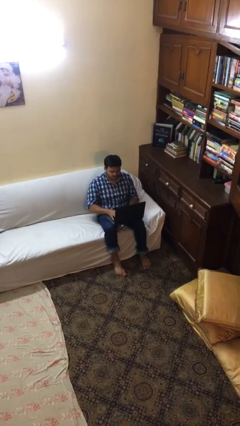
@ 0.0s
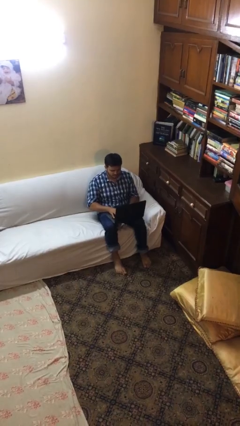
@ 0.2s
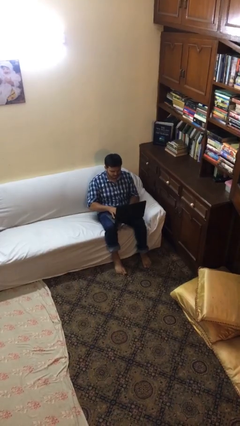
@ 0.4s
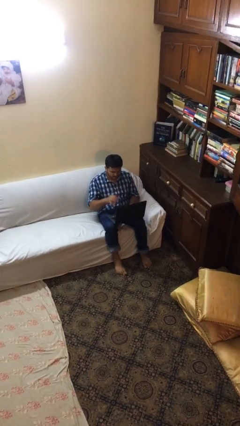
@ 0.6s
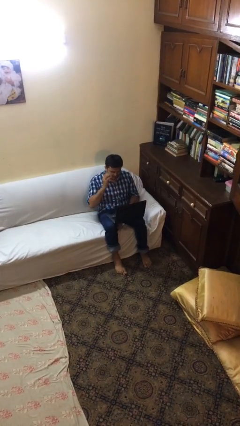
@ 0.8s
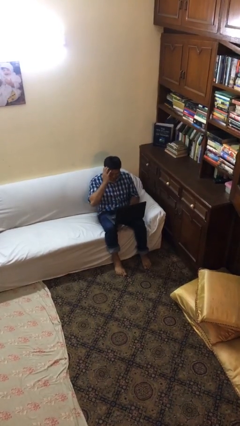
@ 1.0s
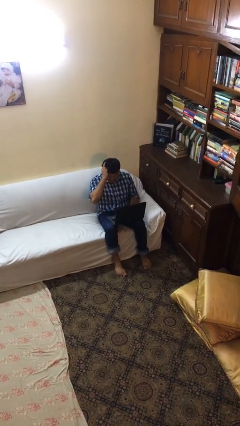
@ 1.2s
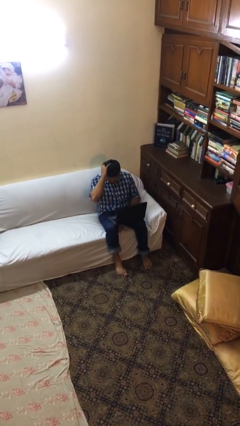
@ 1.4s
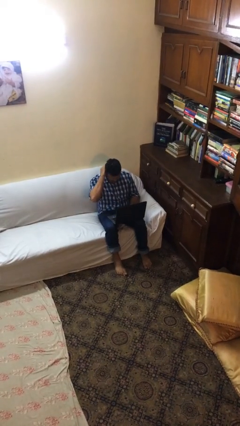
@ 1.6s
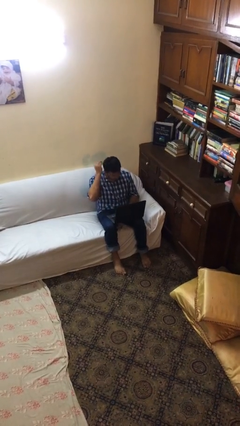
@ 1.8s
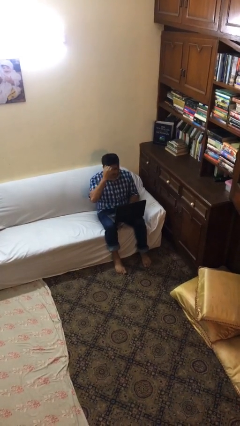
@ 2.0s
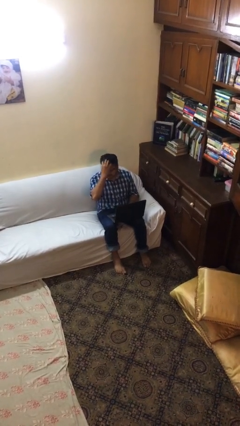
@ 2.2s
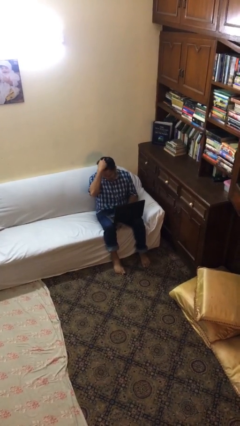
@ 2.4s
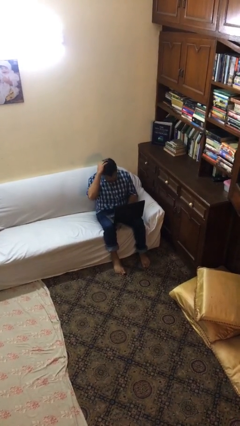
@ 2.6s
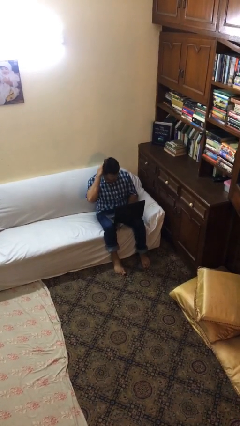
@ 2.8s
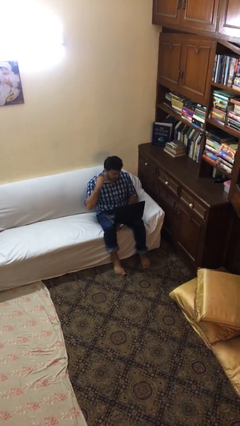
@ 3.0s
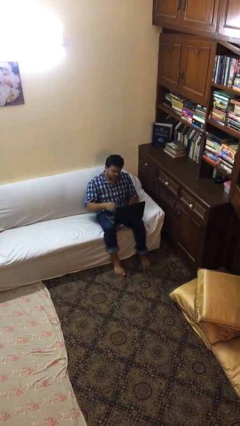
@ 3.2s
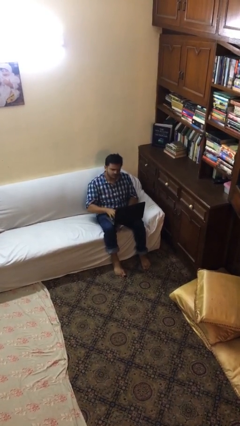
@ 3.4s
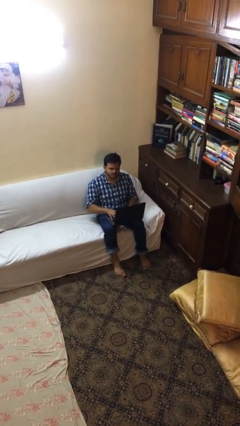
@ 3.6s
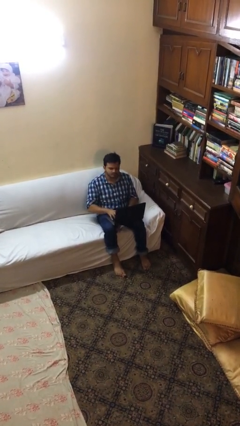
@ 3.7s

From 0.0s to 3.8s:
person interacts with laptop

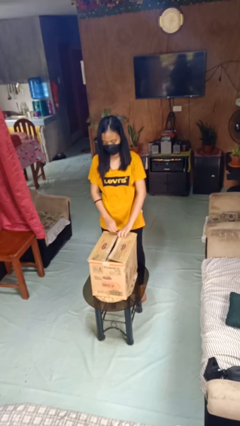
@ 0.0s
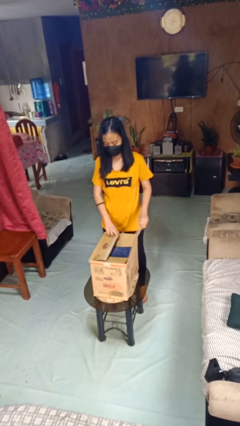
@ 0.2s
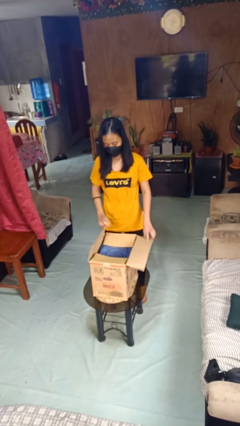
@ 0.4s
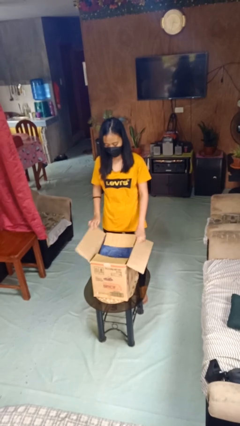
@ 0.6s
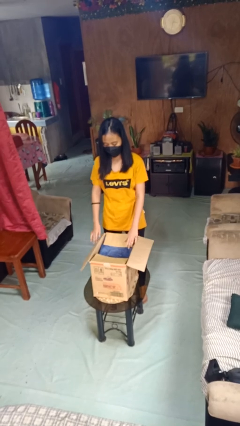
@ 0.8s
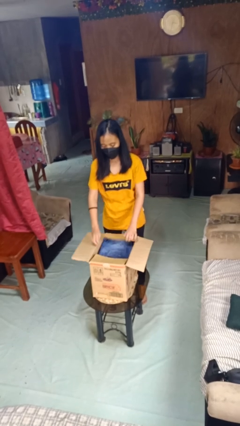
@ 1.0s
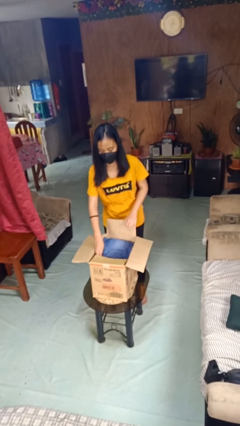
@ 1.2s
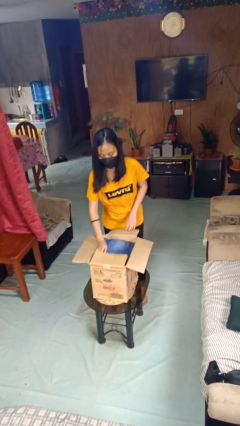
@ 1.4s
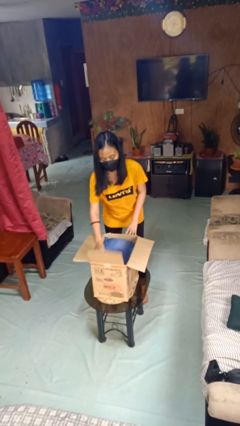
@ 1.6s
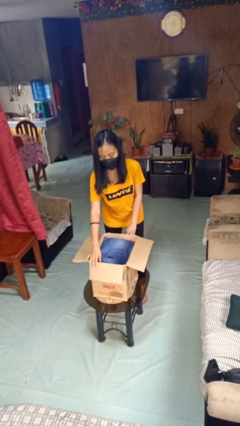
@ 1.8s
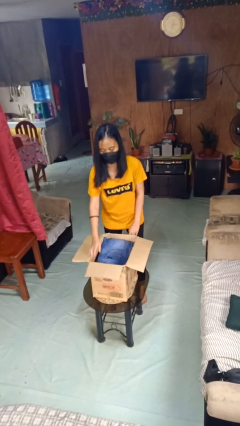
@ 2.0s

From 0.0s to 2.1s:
person opens box

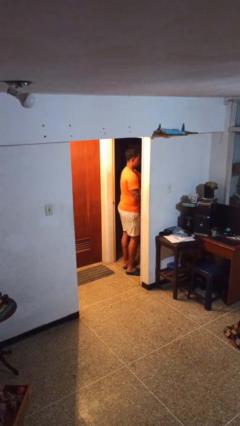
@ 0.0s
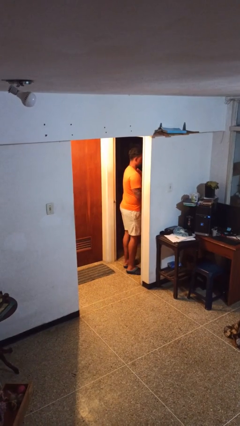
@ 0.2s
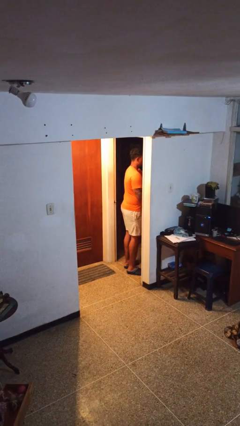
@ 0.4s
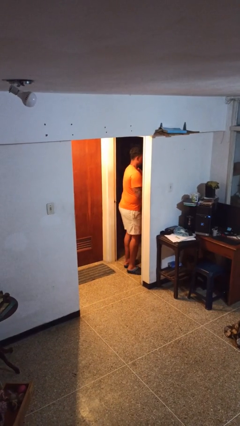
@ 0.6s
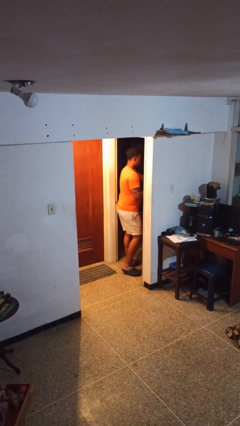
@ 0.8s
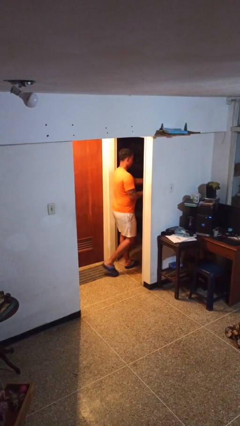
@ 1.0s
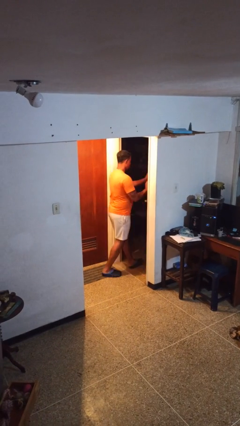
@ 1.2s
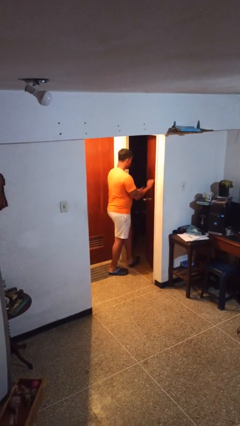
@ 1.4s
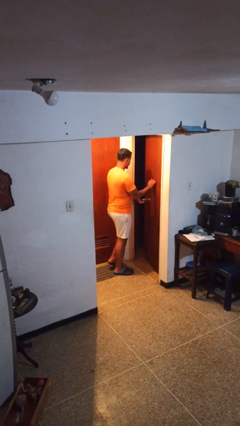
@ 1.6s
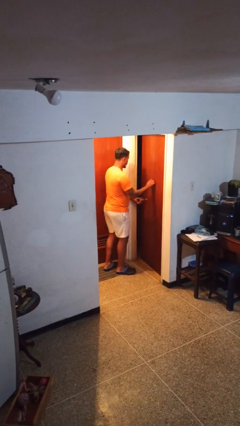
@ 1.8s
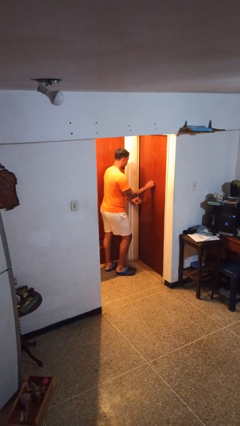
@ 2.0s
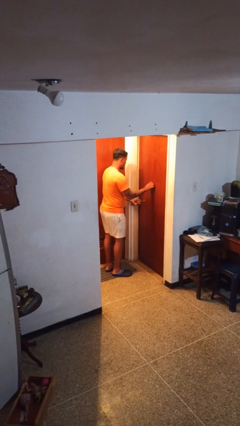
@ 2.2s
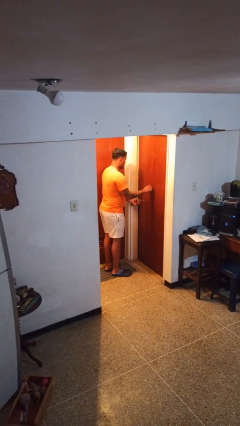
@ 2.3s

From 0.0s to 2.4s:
person closes facility door

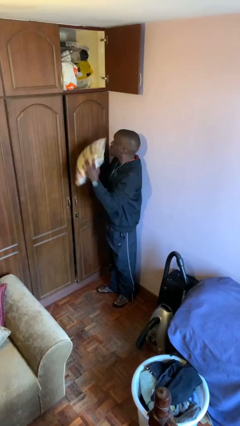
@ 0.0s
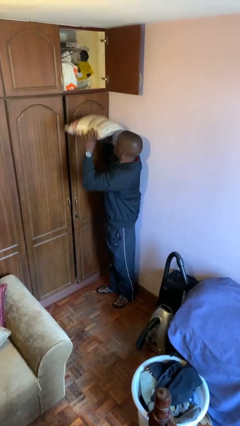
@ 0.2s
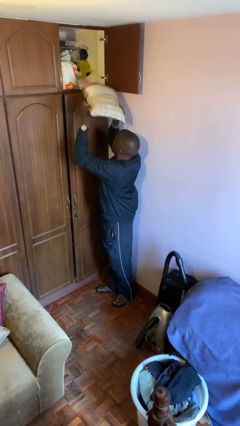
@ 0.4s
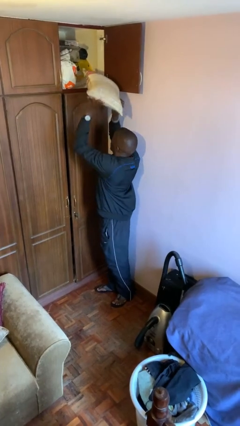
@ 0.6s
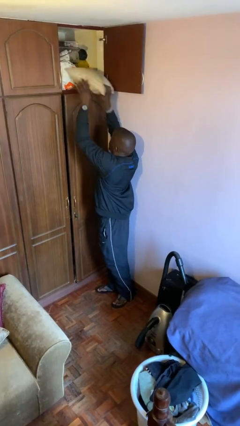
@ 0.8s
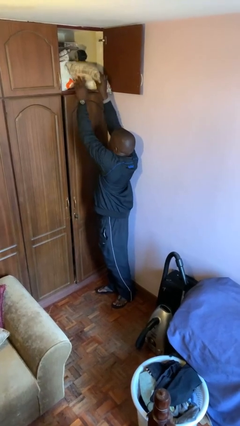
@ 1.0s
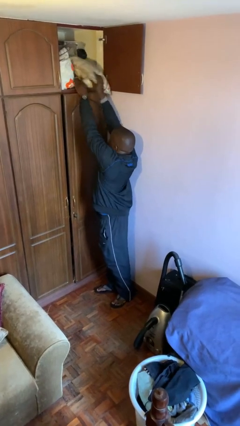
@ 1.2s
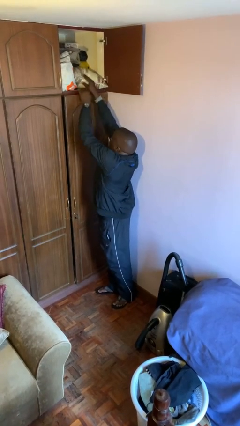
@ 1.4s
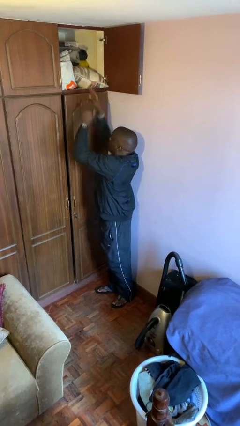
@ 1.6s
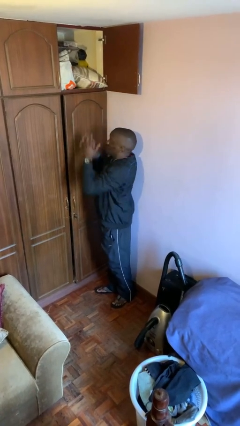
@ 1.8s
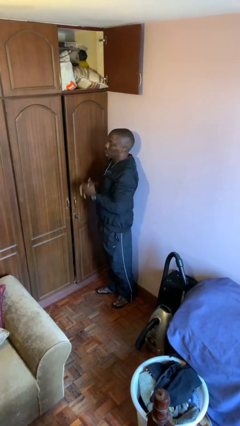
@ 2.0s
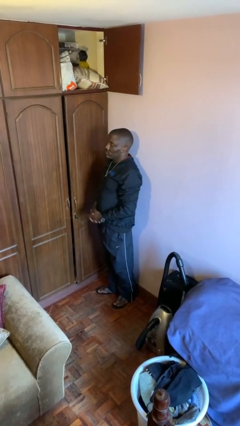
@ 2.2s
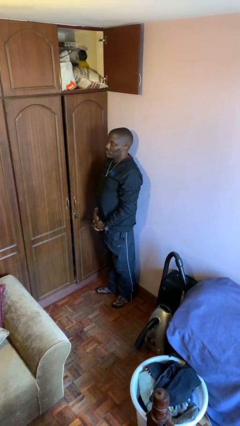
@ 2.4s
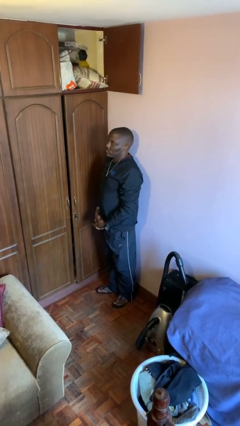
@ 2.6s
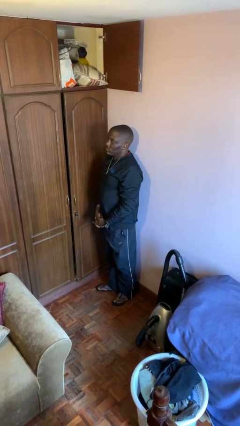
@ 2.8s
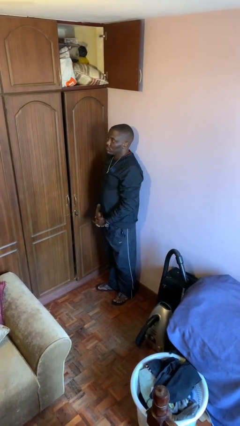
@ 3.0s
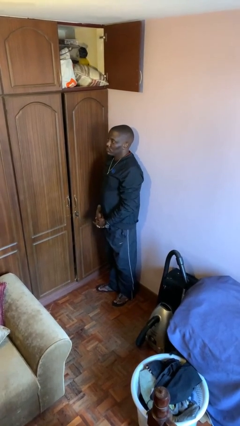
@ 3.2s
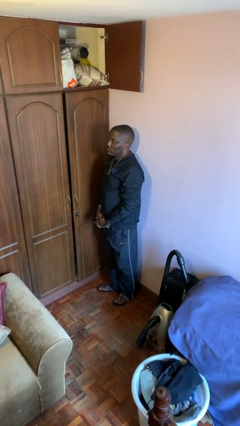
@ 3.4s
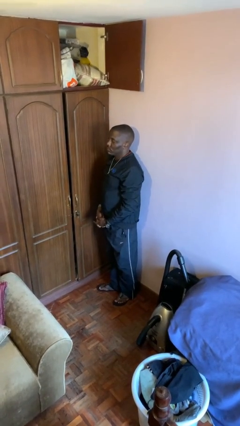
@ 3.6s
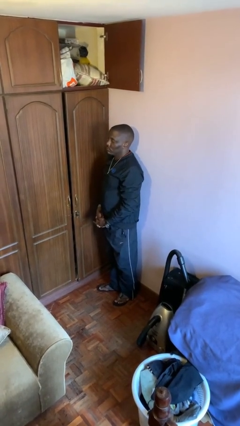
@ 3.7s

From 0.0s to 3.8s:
person puts down object on shelf

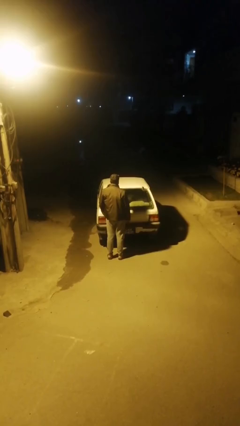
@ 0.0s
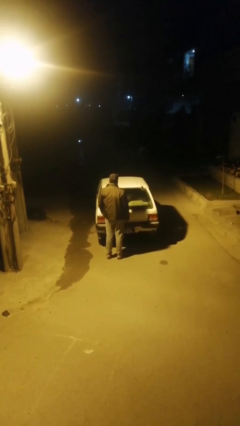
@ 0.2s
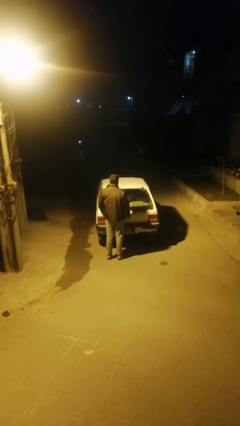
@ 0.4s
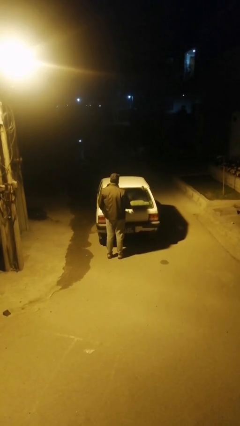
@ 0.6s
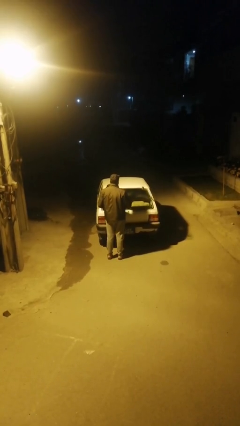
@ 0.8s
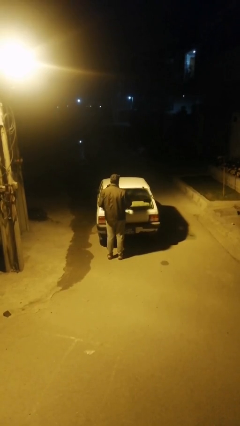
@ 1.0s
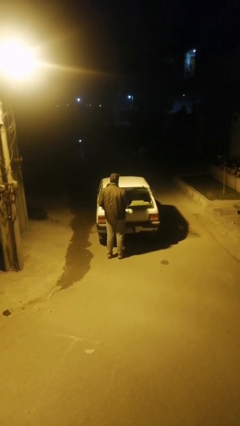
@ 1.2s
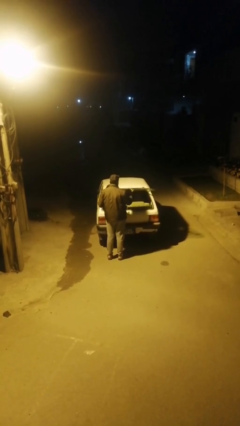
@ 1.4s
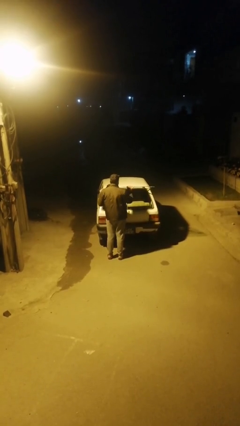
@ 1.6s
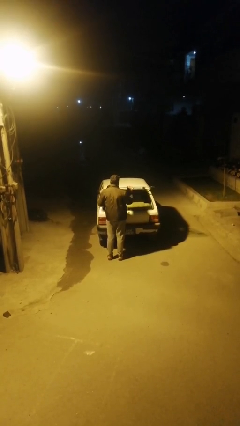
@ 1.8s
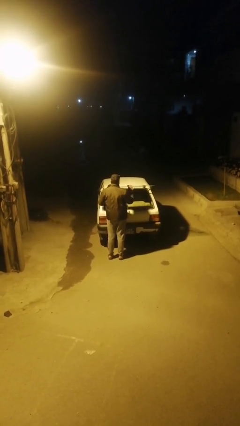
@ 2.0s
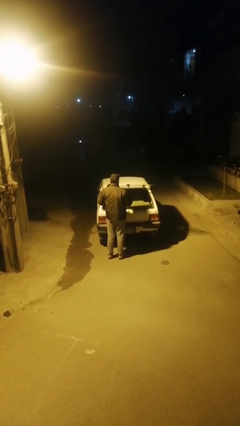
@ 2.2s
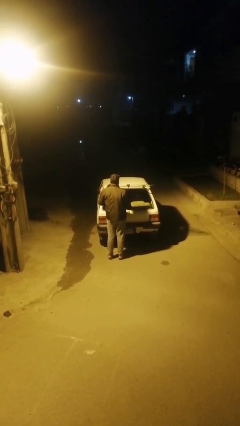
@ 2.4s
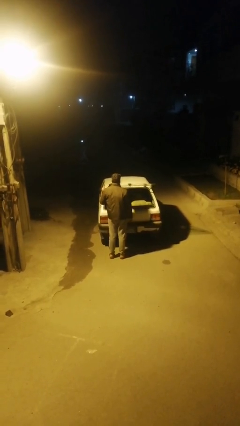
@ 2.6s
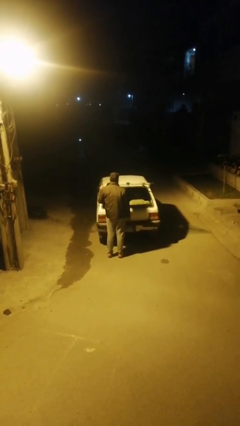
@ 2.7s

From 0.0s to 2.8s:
person opens car trunk

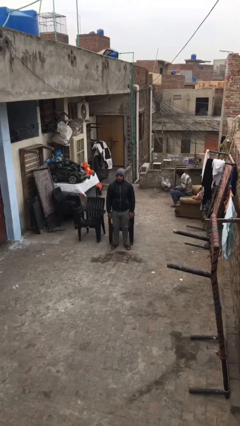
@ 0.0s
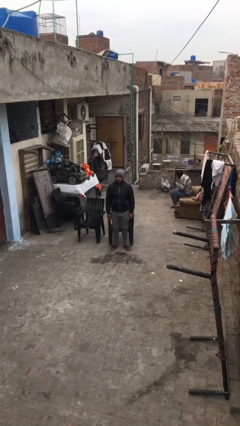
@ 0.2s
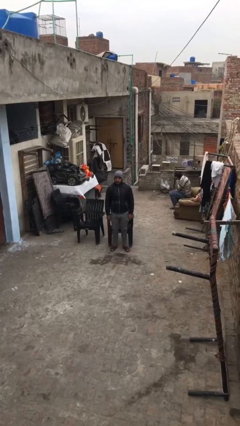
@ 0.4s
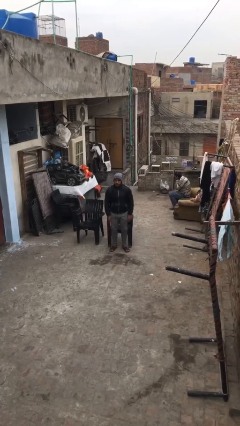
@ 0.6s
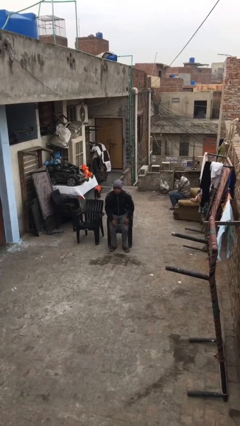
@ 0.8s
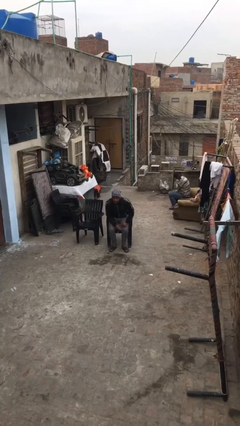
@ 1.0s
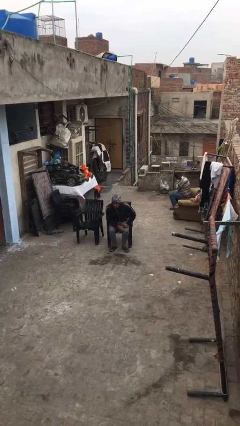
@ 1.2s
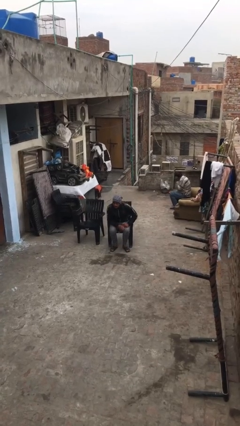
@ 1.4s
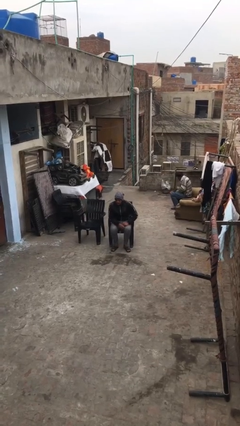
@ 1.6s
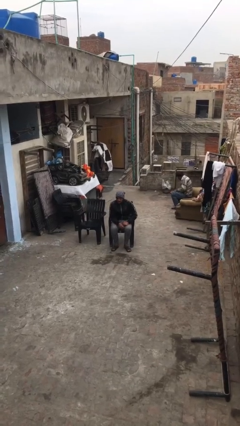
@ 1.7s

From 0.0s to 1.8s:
person sits down

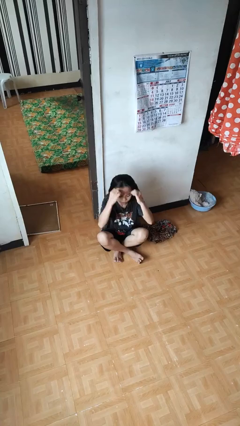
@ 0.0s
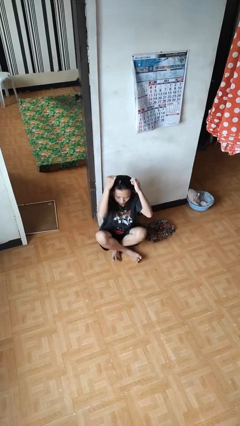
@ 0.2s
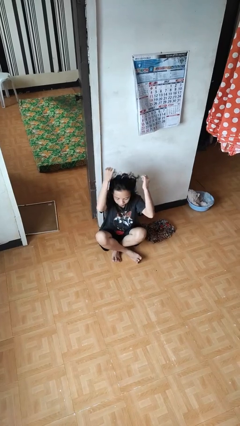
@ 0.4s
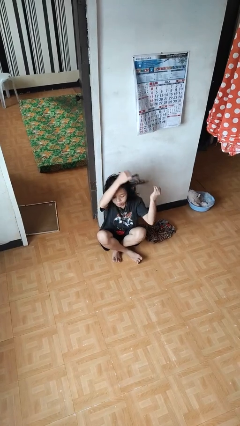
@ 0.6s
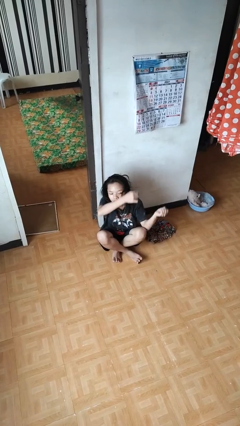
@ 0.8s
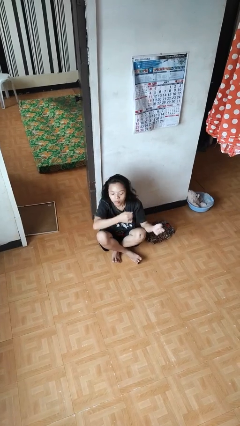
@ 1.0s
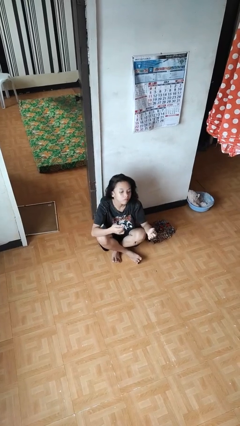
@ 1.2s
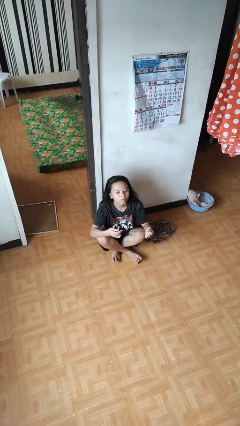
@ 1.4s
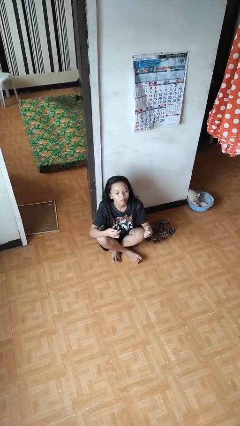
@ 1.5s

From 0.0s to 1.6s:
person takes off necklace
